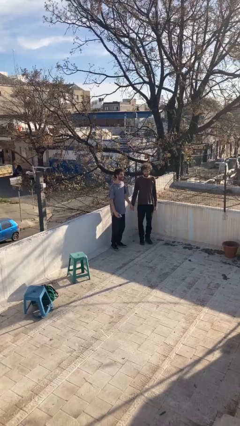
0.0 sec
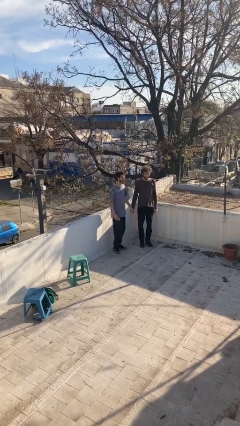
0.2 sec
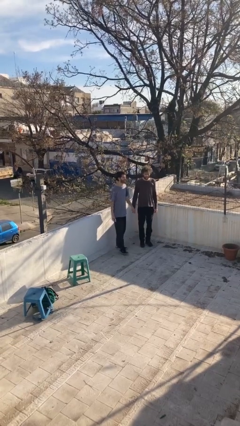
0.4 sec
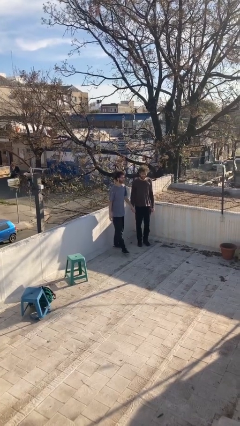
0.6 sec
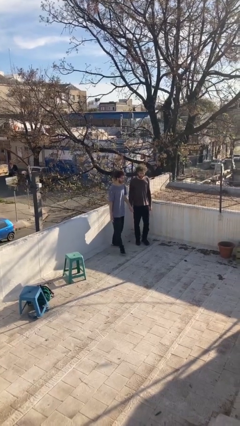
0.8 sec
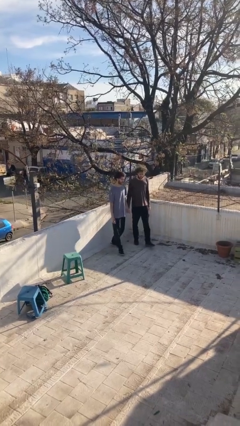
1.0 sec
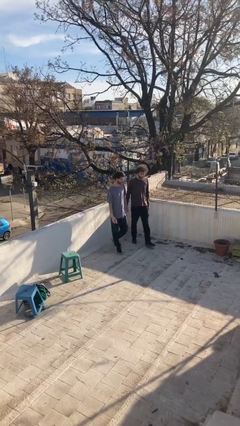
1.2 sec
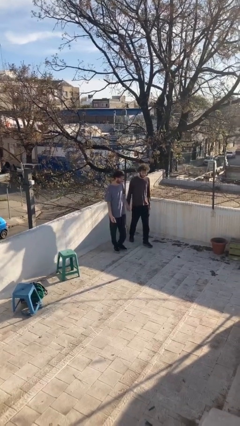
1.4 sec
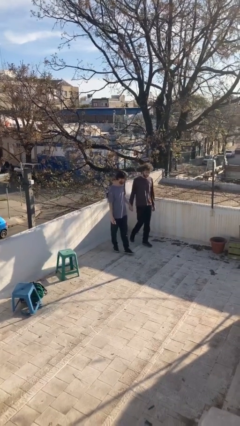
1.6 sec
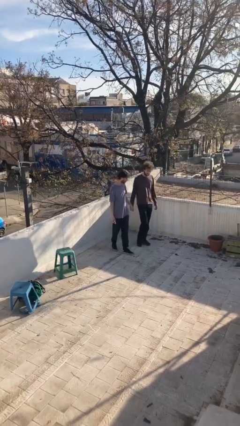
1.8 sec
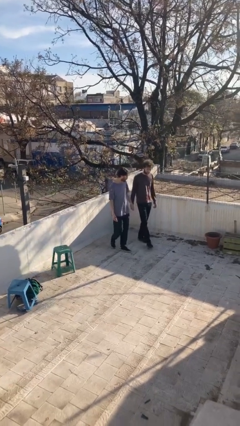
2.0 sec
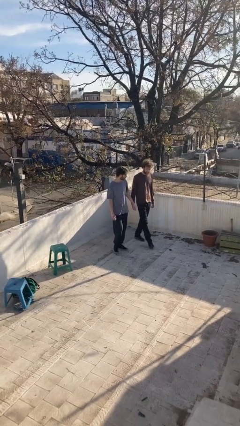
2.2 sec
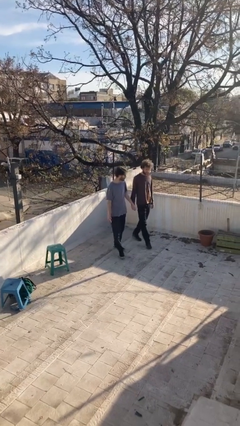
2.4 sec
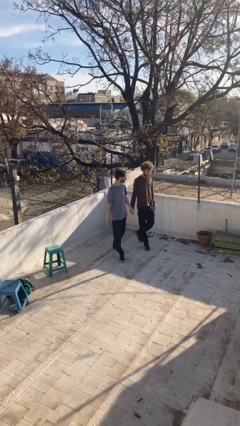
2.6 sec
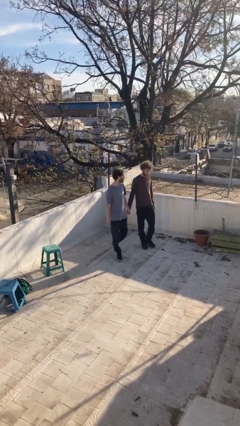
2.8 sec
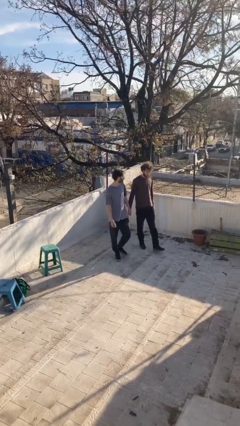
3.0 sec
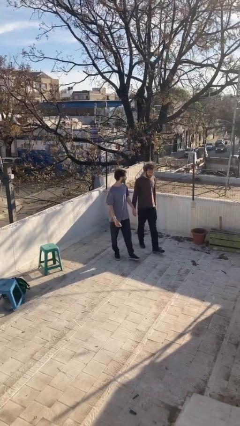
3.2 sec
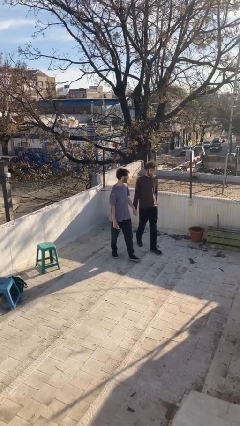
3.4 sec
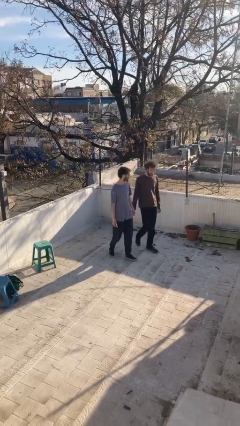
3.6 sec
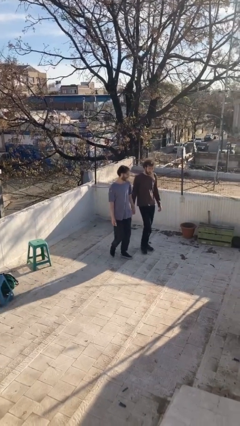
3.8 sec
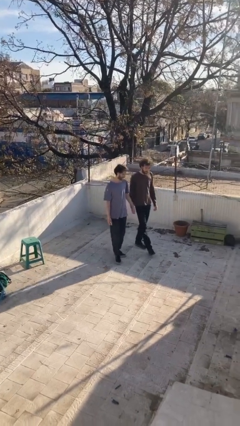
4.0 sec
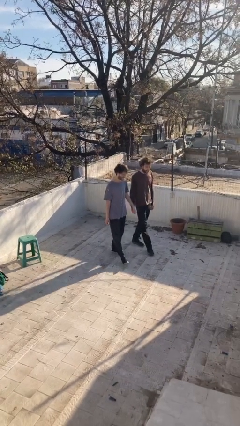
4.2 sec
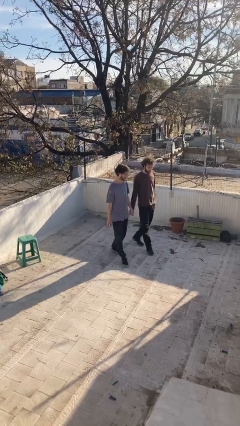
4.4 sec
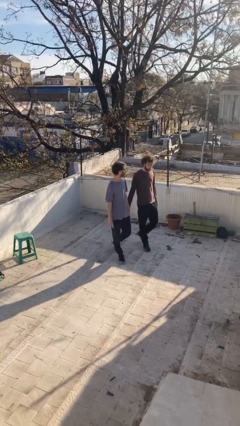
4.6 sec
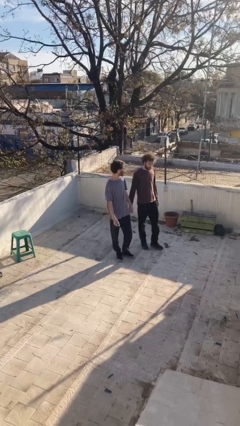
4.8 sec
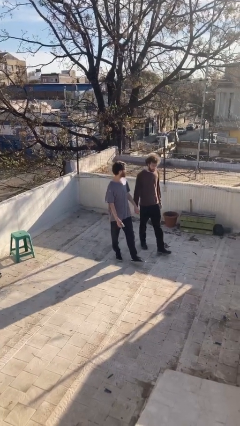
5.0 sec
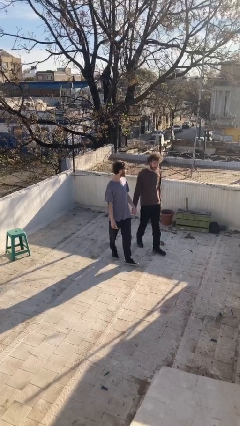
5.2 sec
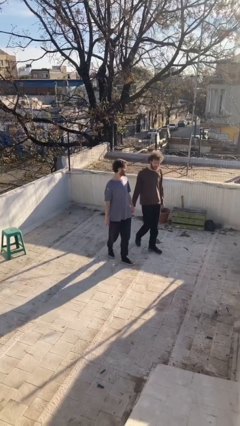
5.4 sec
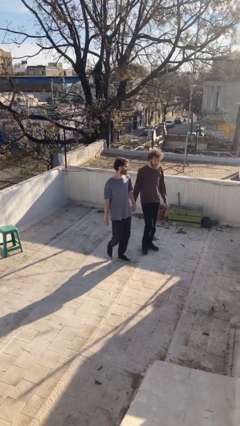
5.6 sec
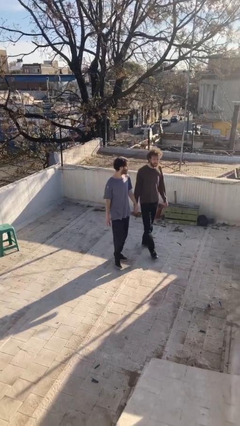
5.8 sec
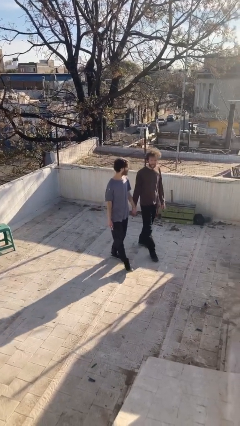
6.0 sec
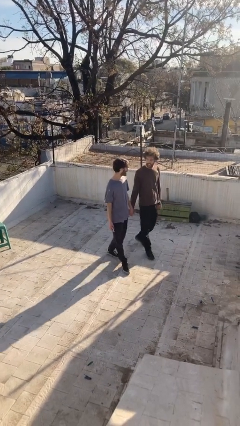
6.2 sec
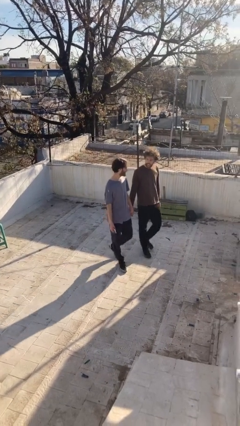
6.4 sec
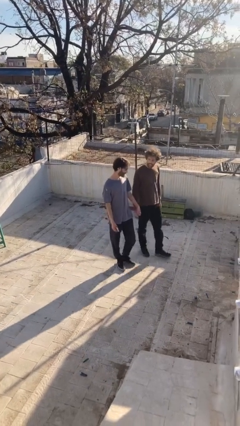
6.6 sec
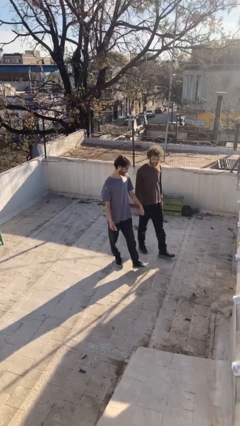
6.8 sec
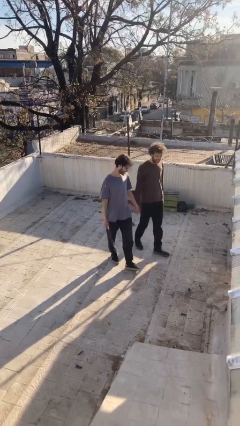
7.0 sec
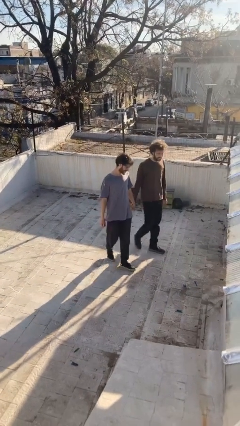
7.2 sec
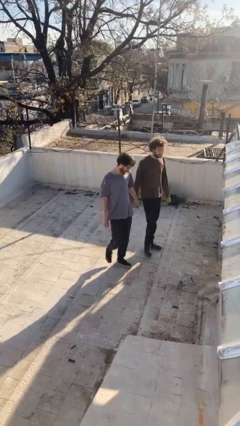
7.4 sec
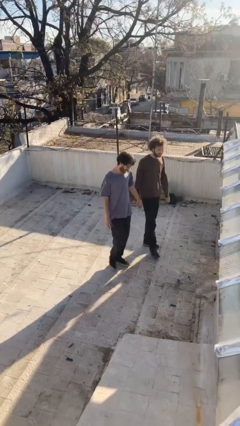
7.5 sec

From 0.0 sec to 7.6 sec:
person holds hand

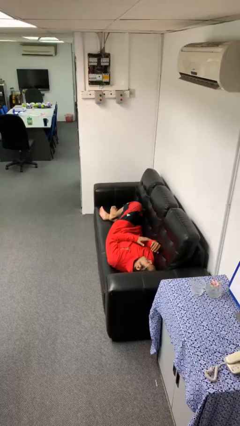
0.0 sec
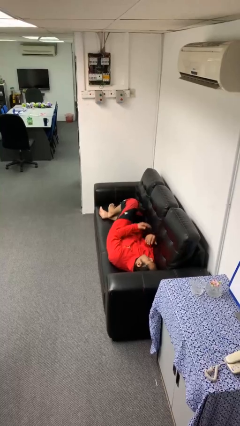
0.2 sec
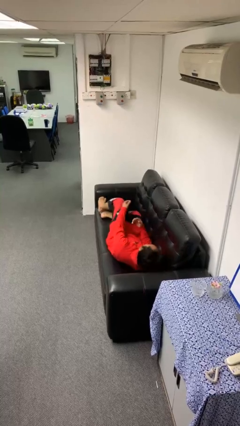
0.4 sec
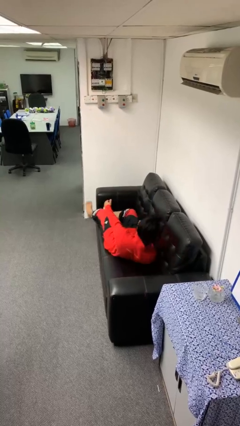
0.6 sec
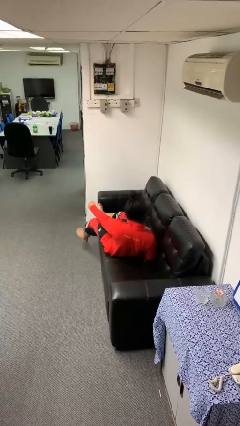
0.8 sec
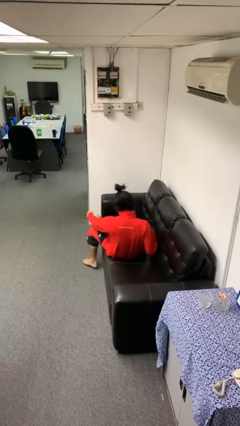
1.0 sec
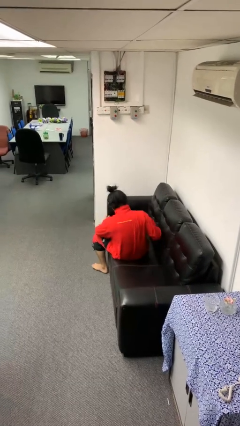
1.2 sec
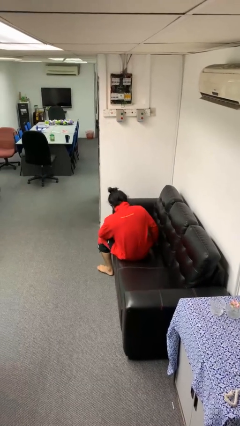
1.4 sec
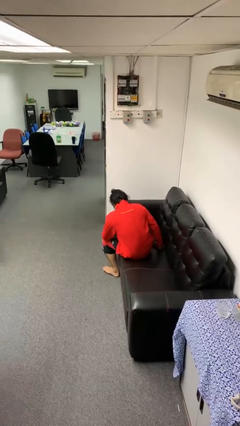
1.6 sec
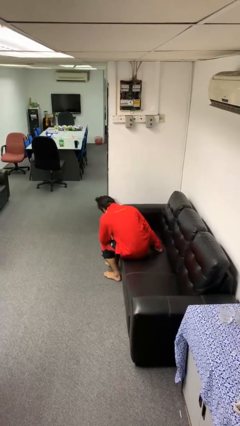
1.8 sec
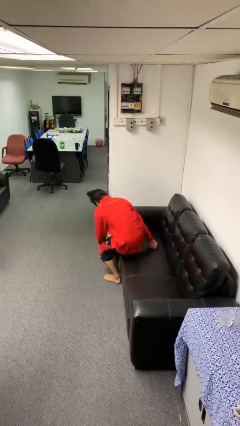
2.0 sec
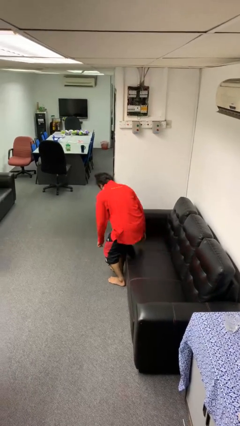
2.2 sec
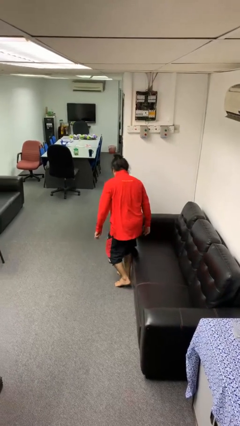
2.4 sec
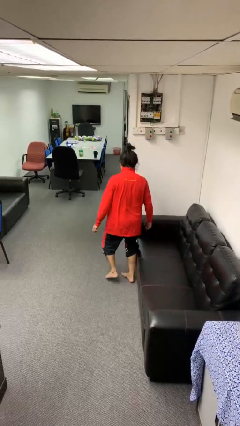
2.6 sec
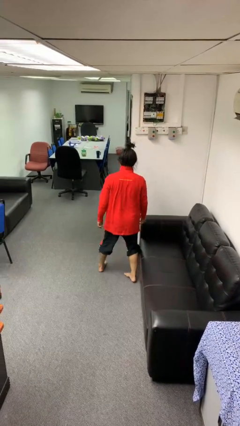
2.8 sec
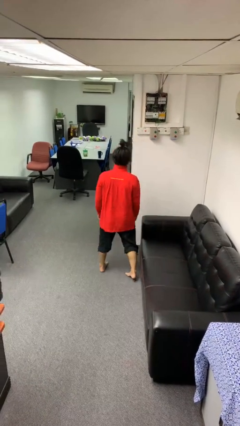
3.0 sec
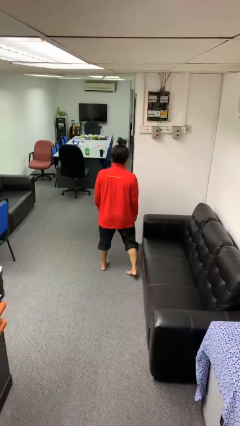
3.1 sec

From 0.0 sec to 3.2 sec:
person stands up

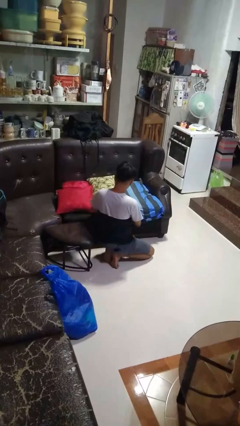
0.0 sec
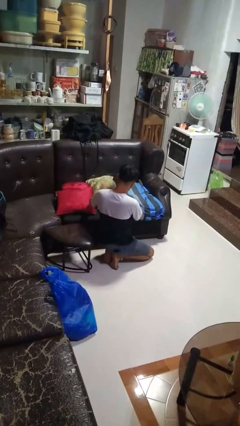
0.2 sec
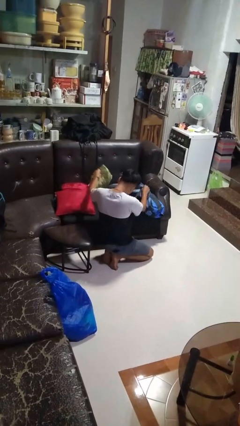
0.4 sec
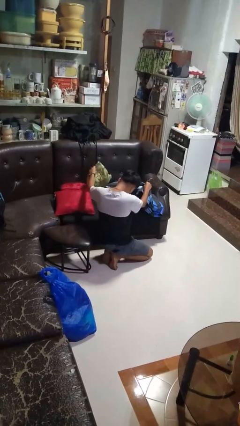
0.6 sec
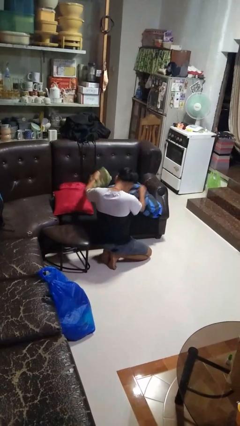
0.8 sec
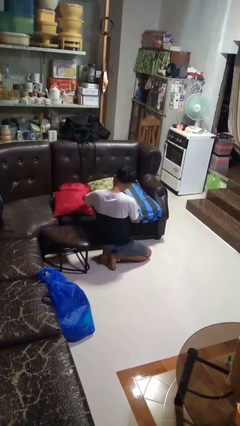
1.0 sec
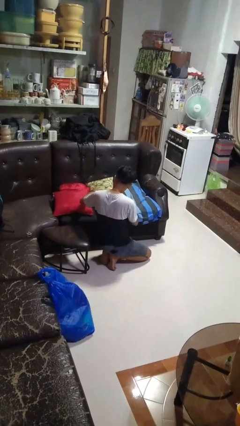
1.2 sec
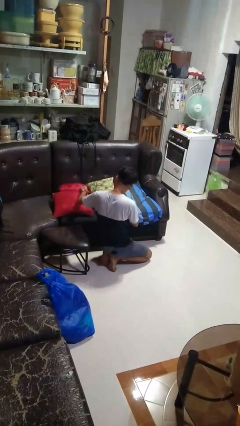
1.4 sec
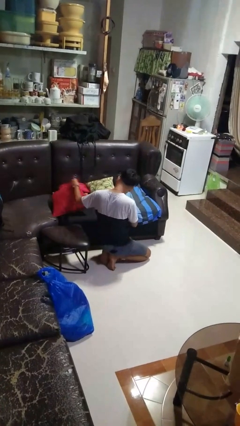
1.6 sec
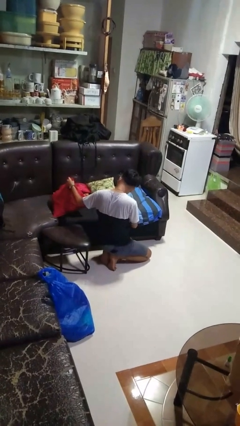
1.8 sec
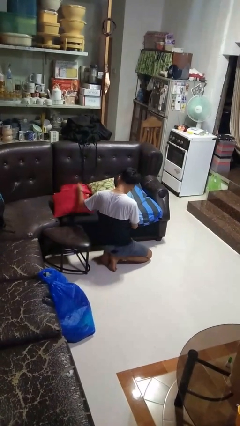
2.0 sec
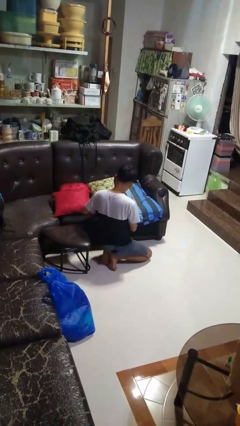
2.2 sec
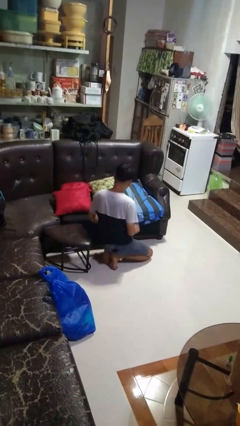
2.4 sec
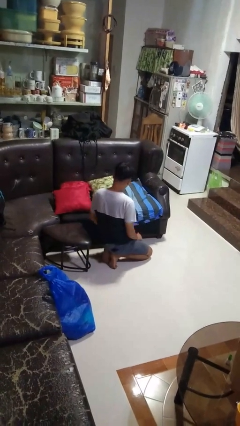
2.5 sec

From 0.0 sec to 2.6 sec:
person searches in couch

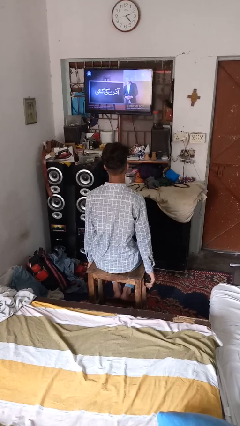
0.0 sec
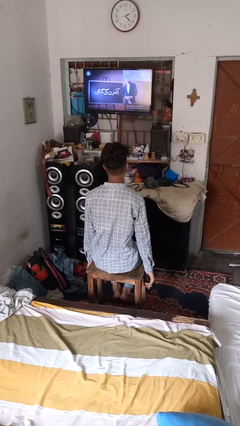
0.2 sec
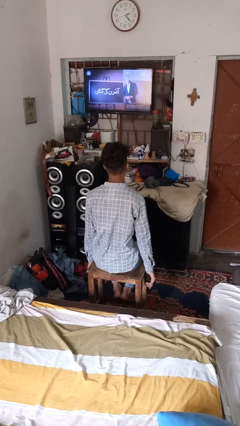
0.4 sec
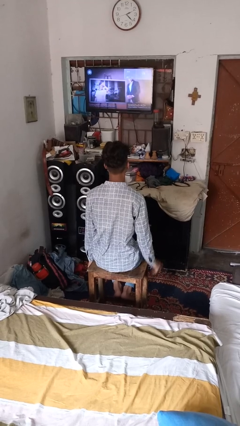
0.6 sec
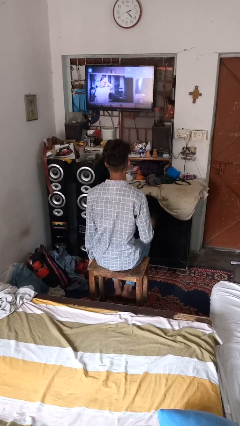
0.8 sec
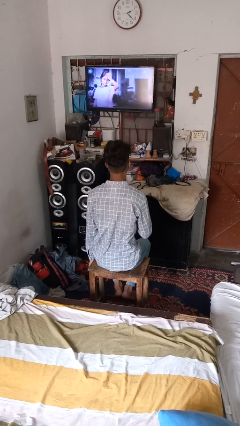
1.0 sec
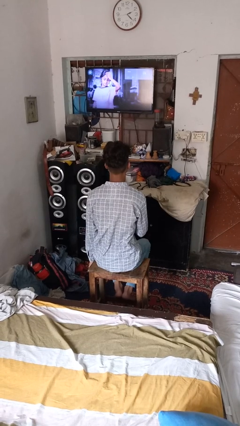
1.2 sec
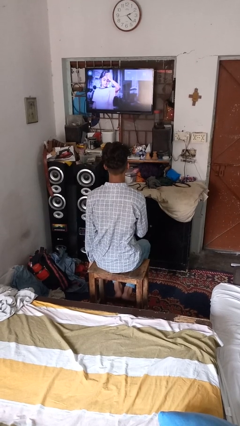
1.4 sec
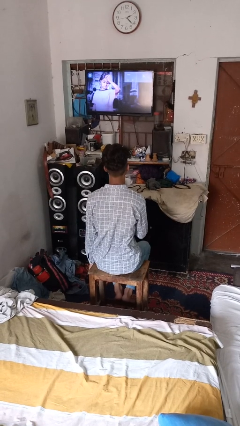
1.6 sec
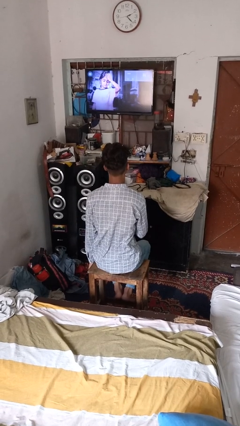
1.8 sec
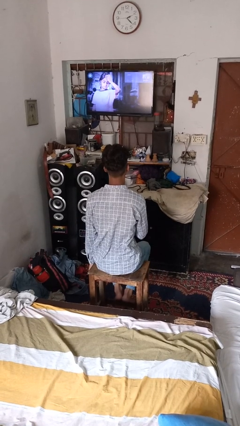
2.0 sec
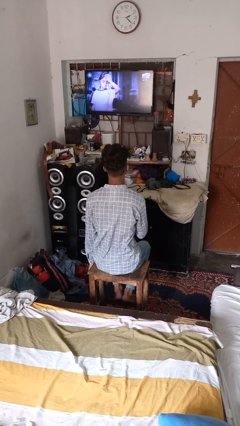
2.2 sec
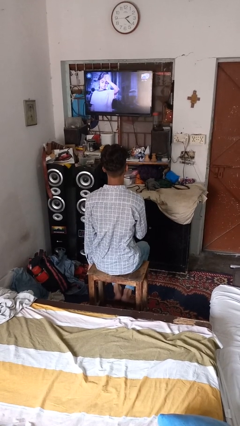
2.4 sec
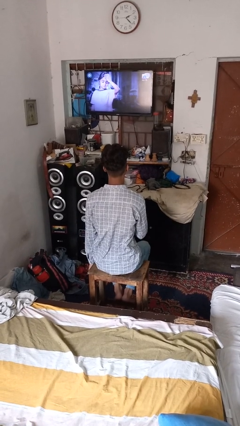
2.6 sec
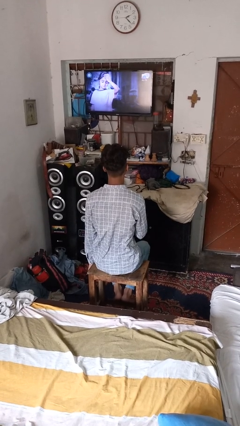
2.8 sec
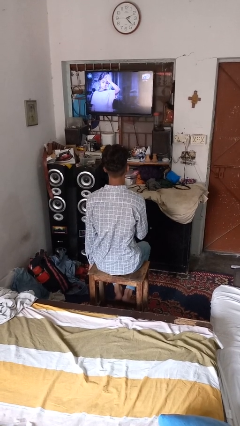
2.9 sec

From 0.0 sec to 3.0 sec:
person uses television remote

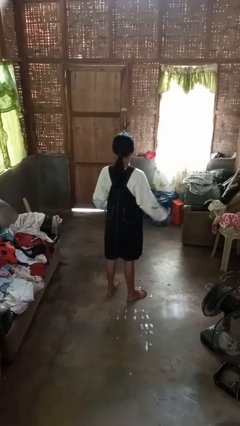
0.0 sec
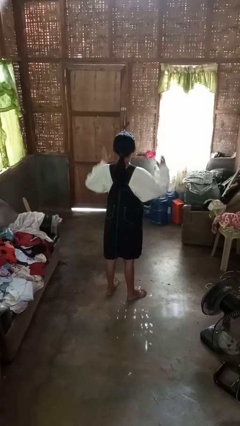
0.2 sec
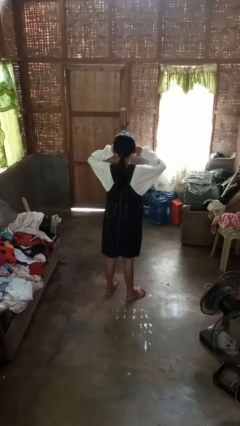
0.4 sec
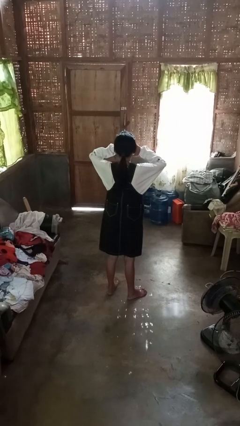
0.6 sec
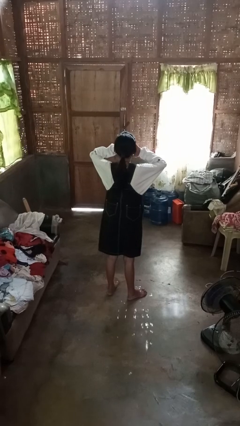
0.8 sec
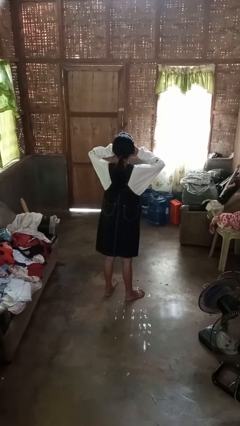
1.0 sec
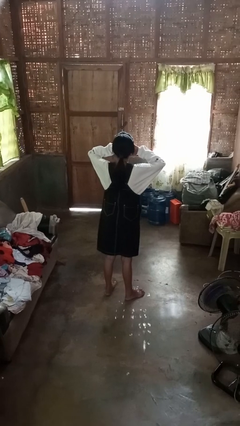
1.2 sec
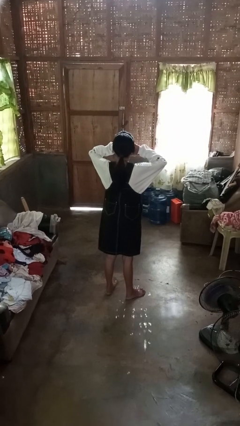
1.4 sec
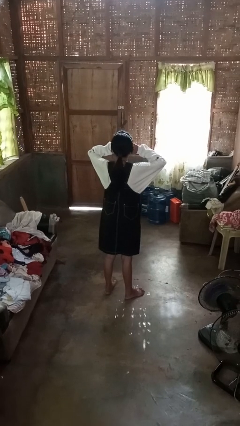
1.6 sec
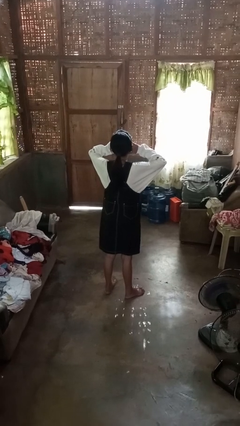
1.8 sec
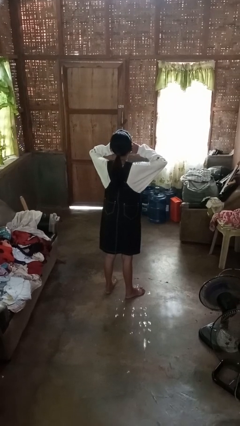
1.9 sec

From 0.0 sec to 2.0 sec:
person puts fingers in ear
